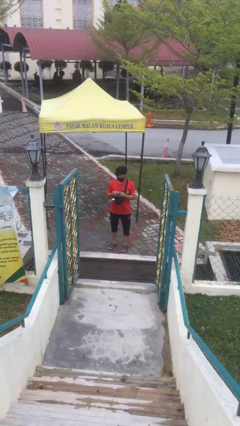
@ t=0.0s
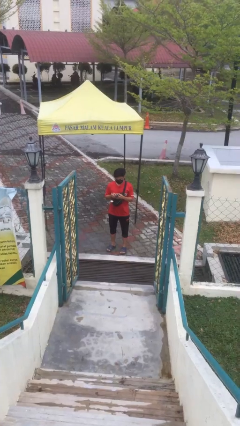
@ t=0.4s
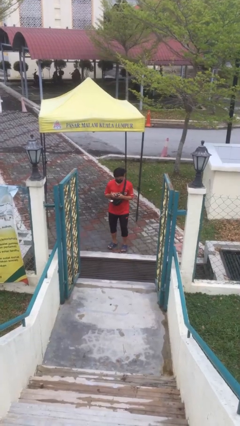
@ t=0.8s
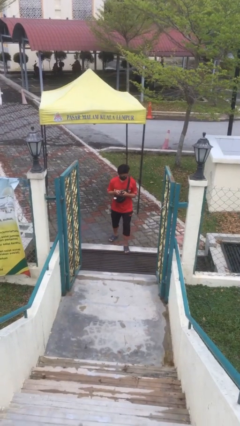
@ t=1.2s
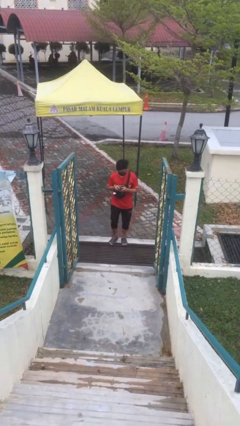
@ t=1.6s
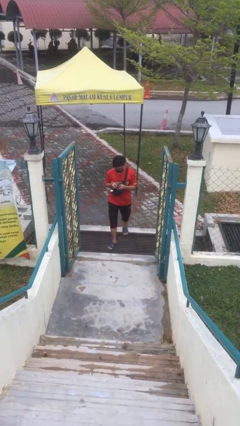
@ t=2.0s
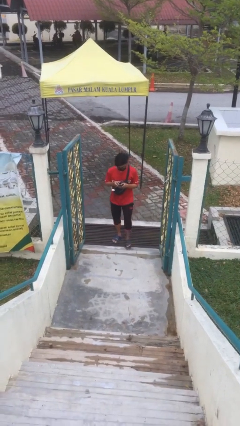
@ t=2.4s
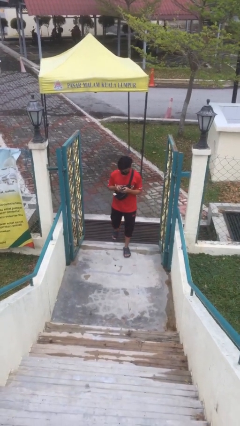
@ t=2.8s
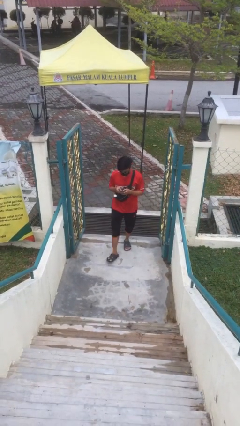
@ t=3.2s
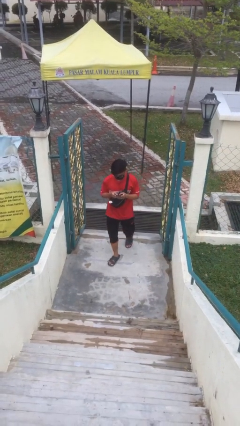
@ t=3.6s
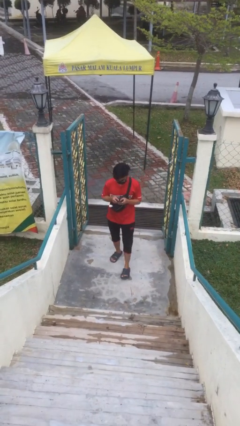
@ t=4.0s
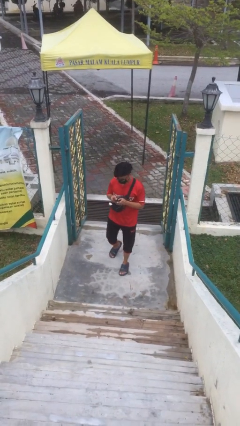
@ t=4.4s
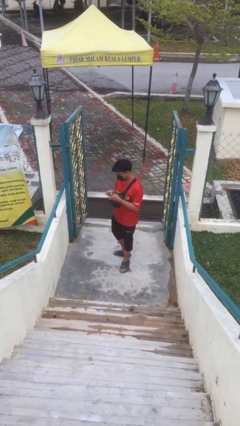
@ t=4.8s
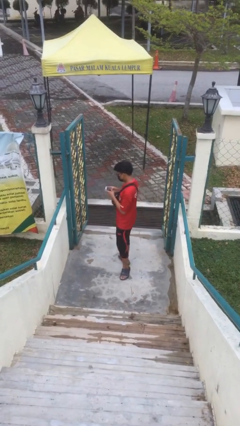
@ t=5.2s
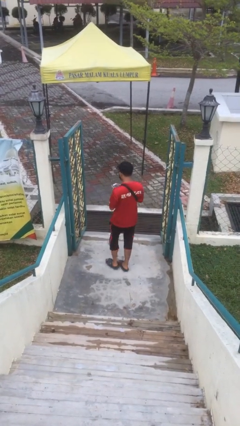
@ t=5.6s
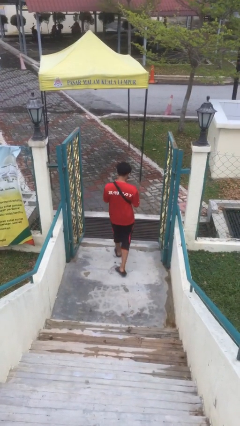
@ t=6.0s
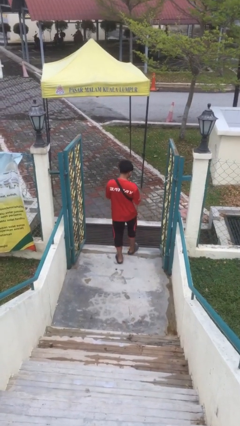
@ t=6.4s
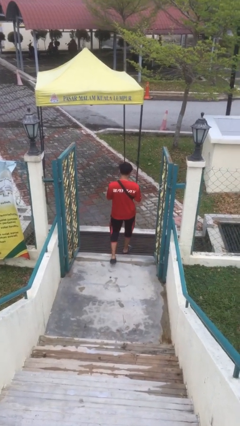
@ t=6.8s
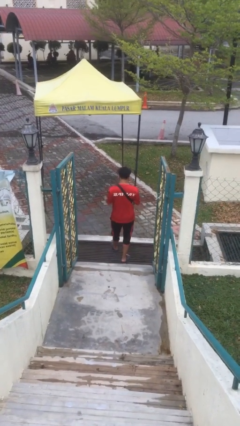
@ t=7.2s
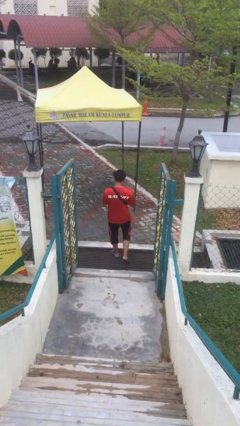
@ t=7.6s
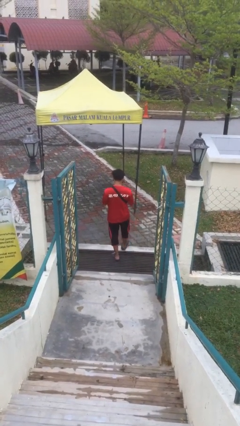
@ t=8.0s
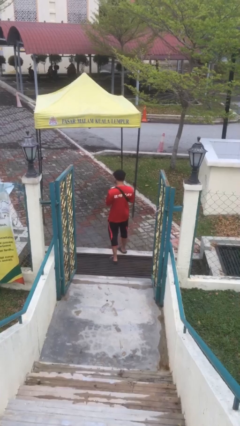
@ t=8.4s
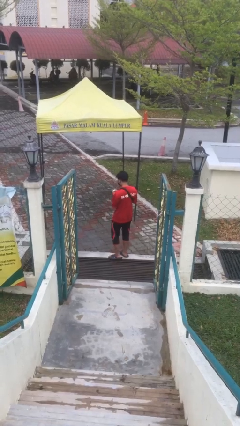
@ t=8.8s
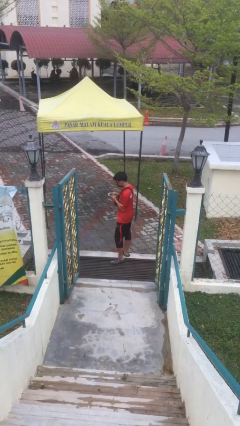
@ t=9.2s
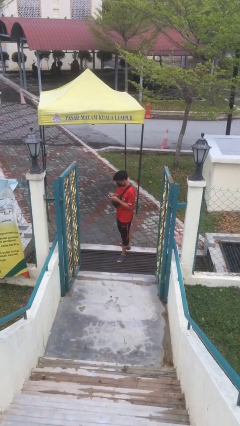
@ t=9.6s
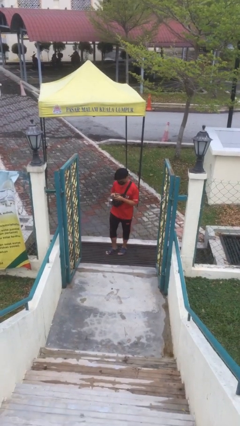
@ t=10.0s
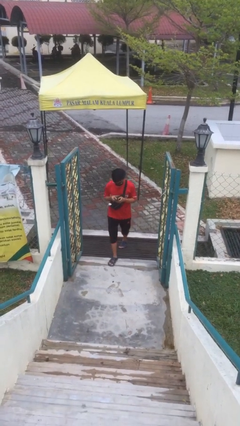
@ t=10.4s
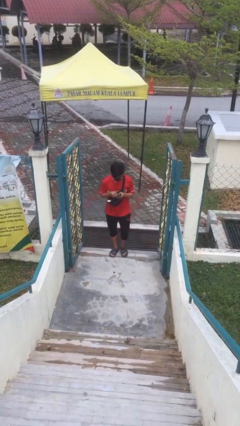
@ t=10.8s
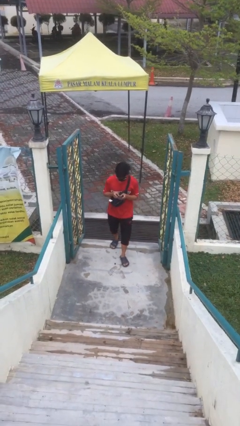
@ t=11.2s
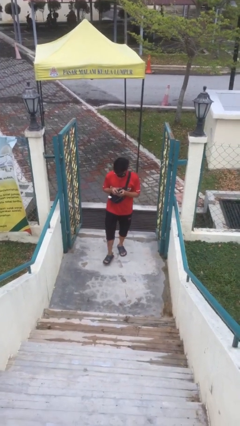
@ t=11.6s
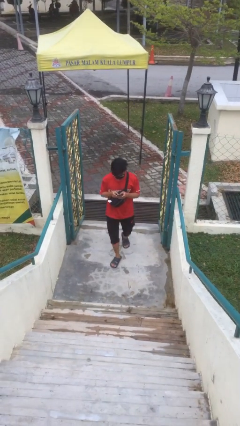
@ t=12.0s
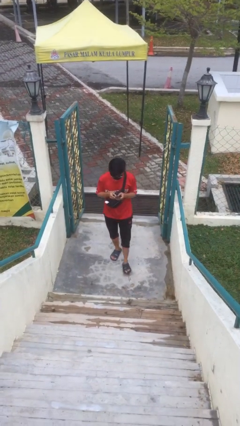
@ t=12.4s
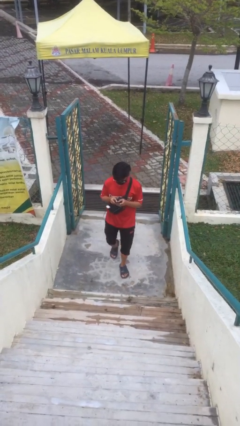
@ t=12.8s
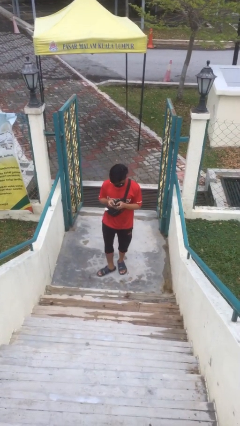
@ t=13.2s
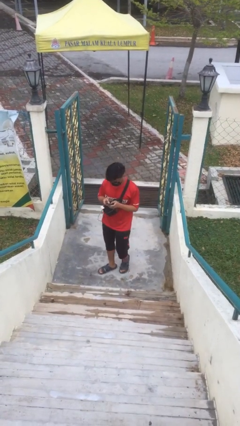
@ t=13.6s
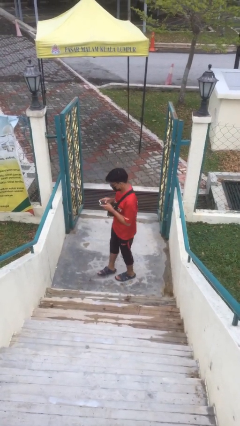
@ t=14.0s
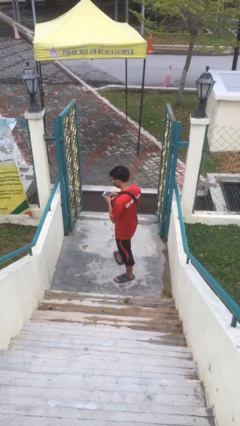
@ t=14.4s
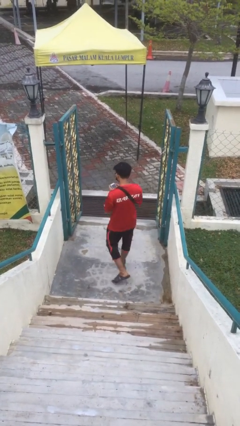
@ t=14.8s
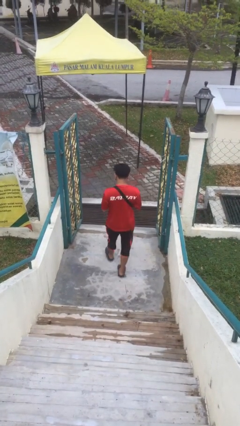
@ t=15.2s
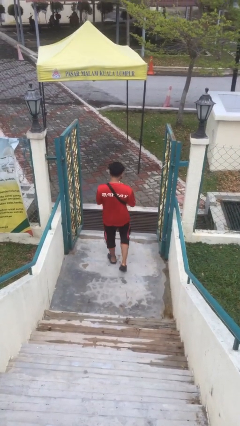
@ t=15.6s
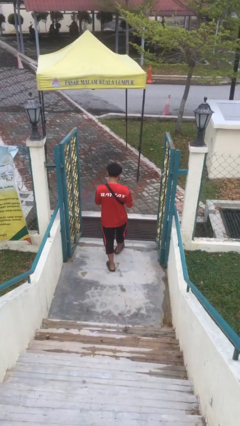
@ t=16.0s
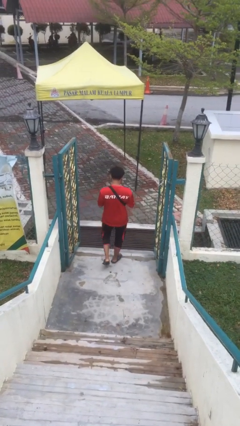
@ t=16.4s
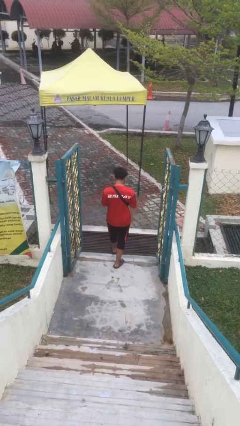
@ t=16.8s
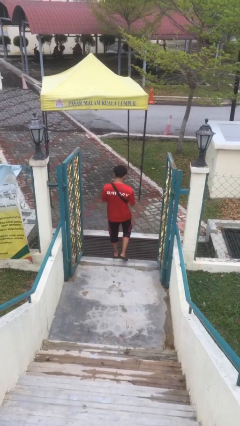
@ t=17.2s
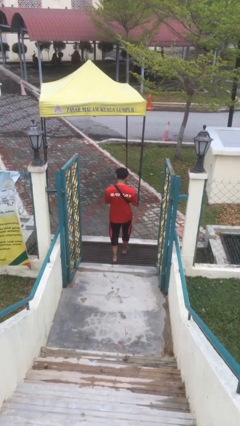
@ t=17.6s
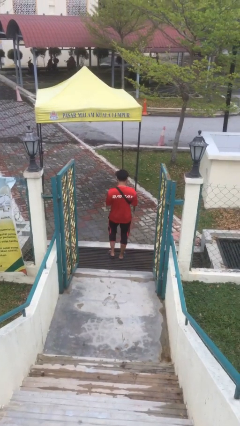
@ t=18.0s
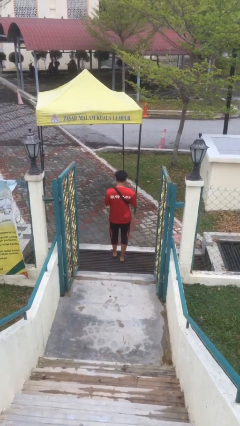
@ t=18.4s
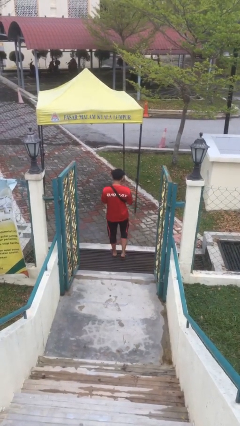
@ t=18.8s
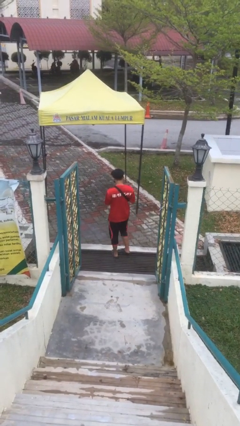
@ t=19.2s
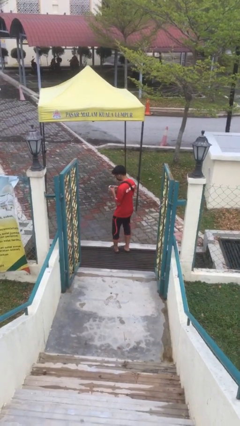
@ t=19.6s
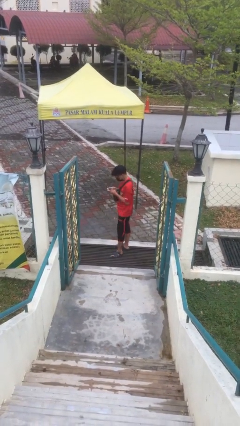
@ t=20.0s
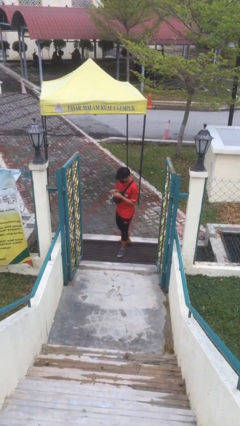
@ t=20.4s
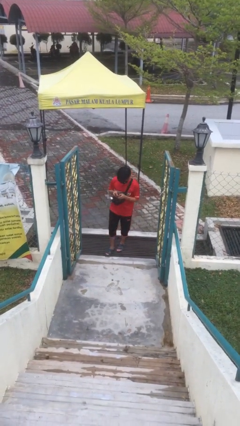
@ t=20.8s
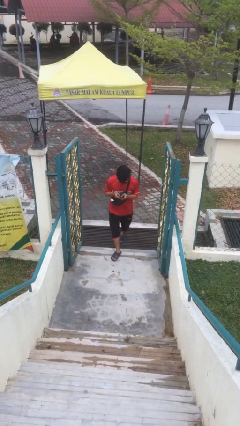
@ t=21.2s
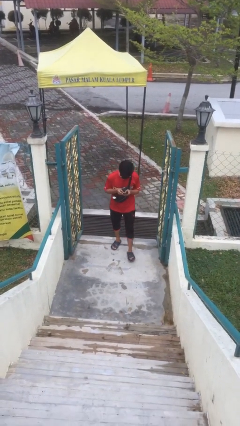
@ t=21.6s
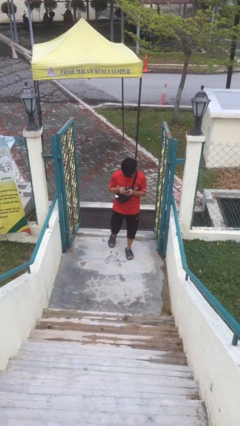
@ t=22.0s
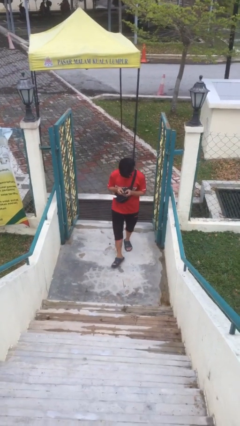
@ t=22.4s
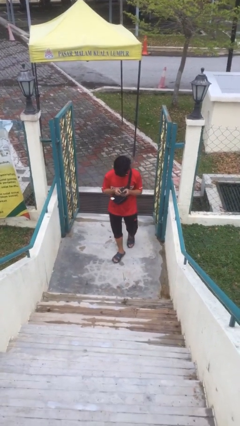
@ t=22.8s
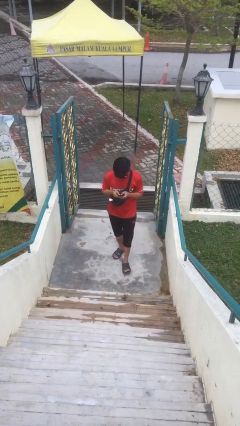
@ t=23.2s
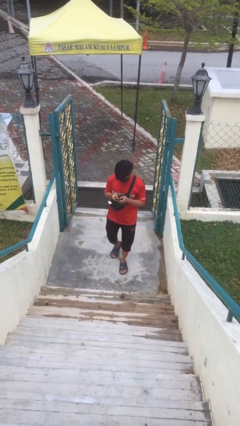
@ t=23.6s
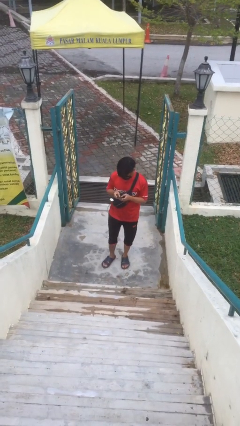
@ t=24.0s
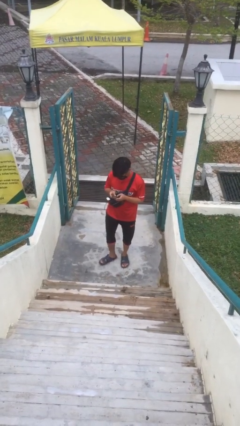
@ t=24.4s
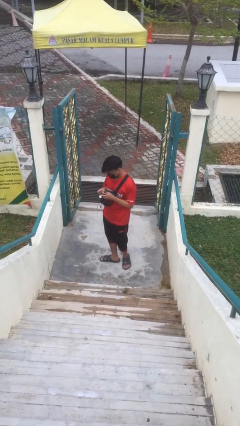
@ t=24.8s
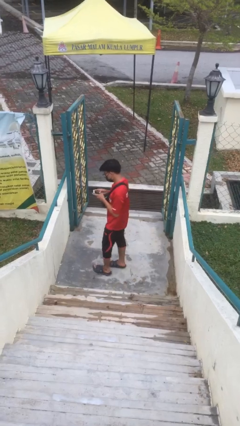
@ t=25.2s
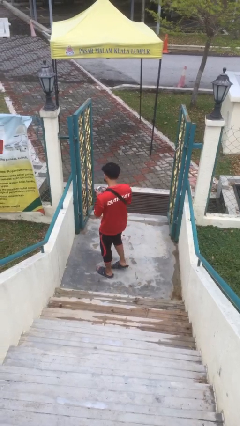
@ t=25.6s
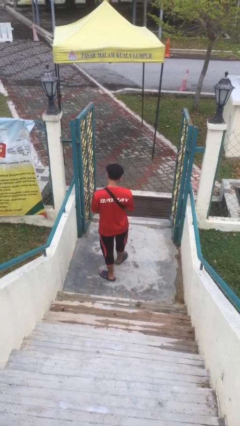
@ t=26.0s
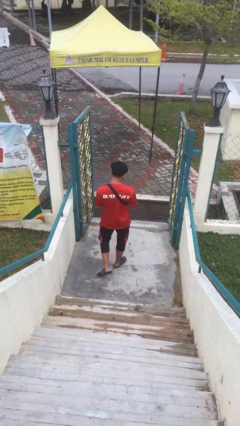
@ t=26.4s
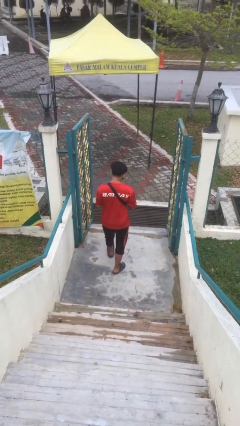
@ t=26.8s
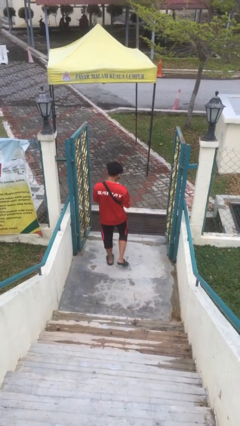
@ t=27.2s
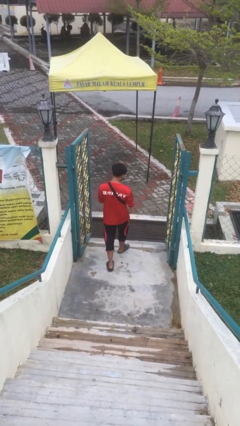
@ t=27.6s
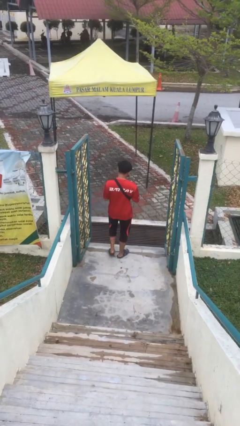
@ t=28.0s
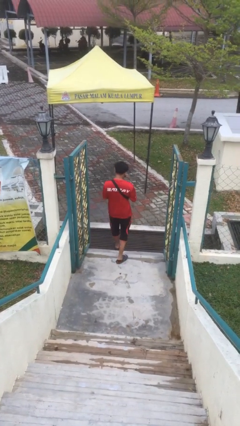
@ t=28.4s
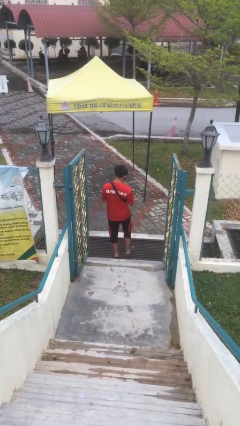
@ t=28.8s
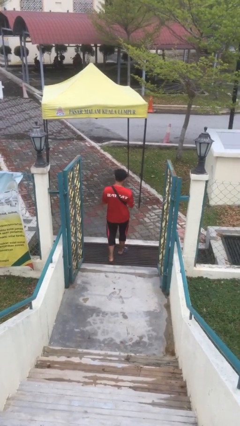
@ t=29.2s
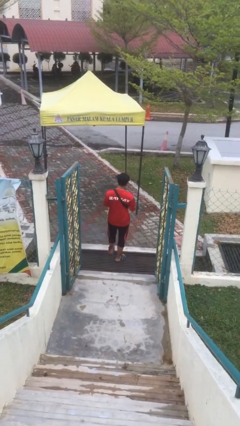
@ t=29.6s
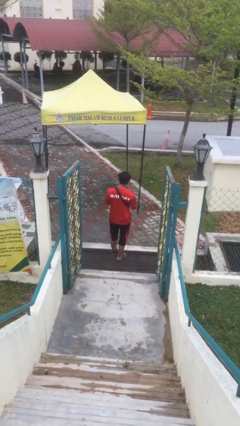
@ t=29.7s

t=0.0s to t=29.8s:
person texts on phone

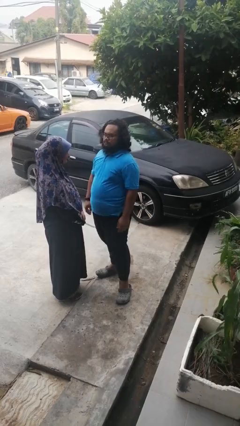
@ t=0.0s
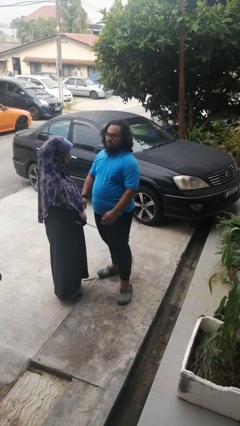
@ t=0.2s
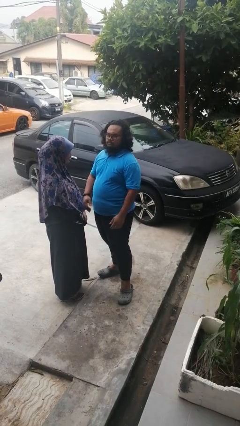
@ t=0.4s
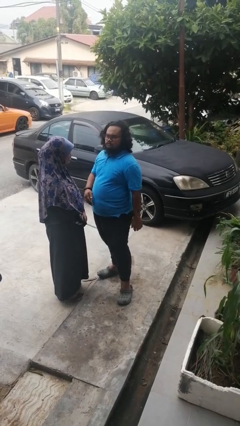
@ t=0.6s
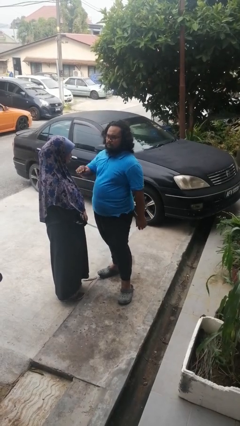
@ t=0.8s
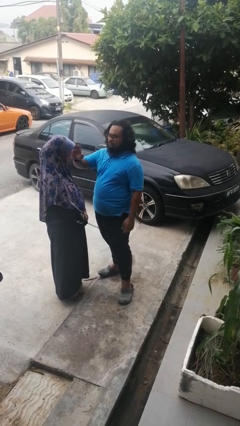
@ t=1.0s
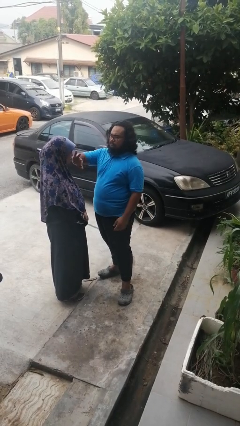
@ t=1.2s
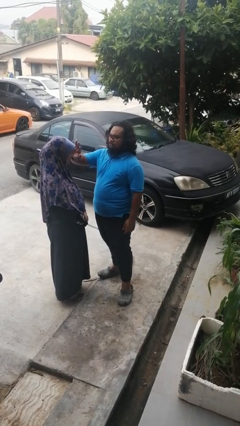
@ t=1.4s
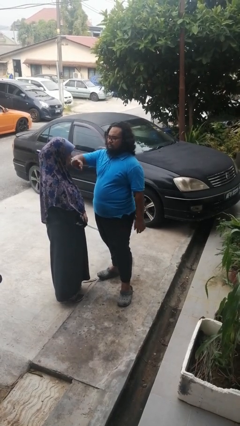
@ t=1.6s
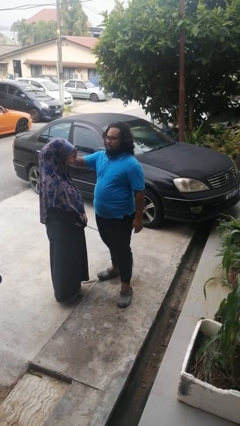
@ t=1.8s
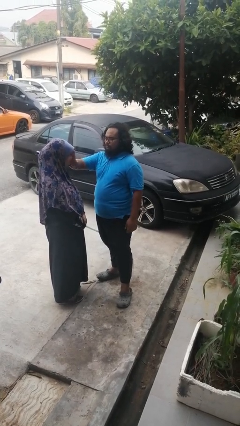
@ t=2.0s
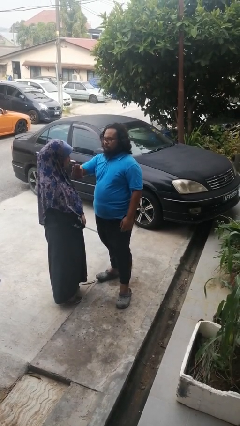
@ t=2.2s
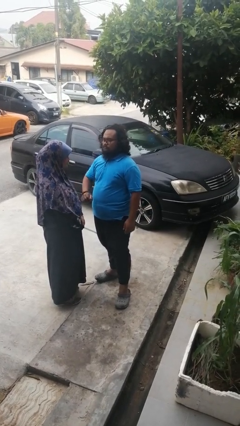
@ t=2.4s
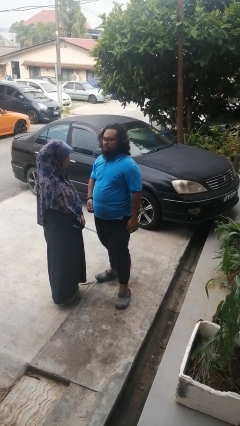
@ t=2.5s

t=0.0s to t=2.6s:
person touches face of person

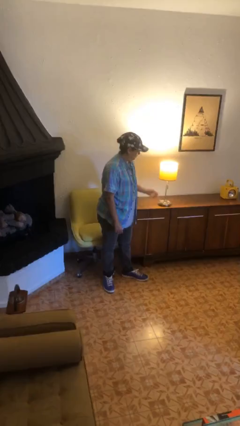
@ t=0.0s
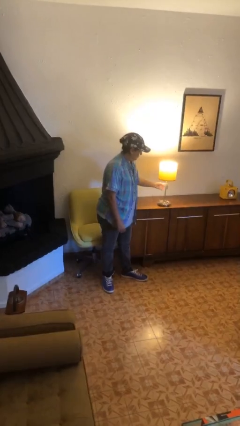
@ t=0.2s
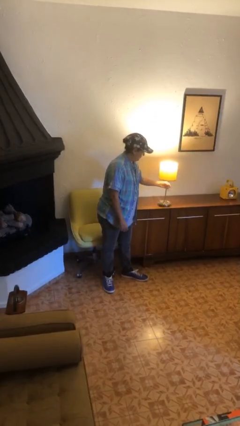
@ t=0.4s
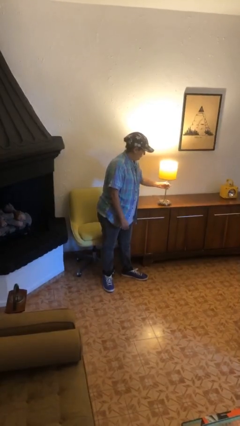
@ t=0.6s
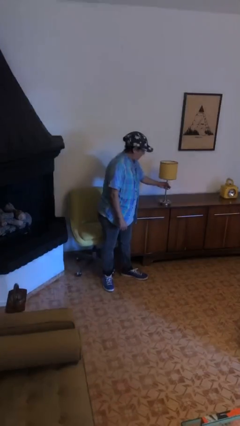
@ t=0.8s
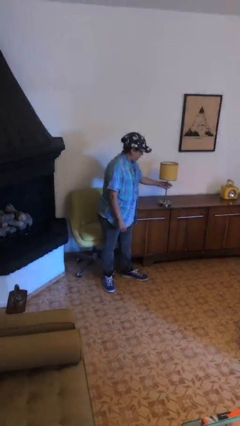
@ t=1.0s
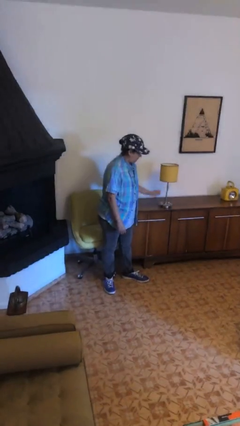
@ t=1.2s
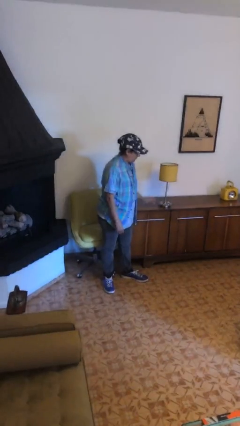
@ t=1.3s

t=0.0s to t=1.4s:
person turns off lamp
